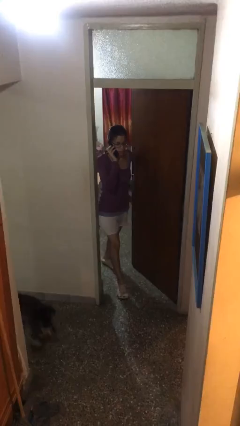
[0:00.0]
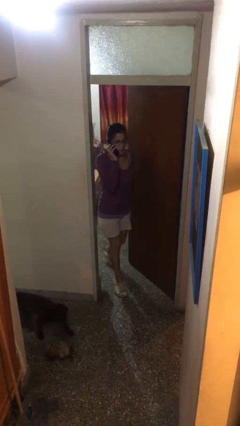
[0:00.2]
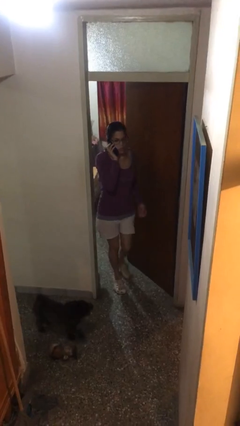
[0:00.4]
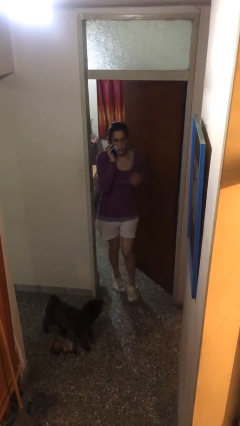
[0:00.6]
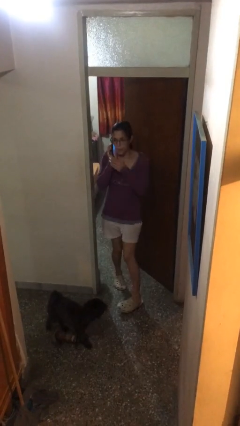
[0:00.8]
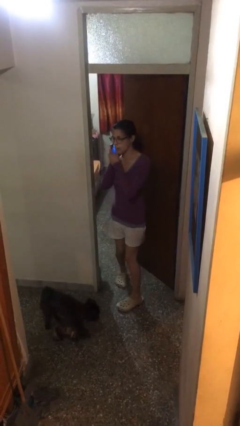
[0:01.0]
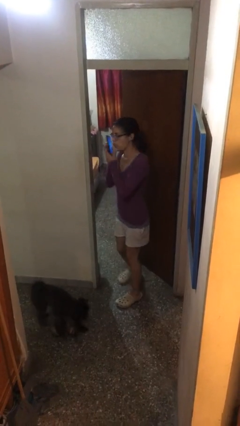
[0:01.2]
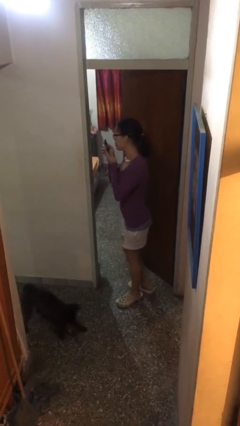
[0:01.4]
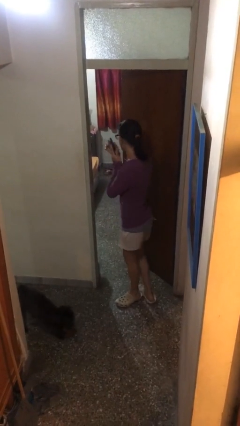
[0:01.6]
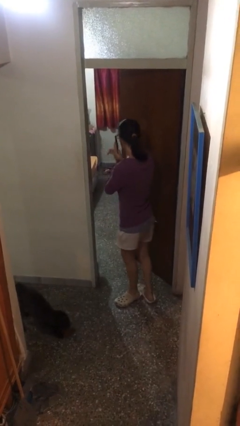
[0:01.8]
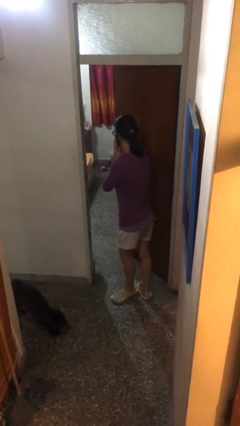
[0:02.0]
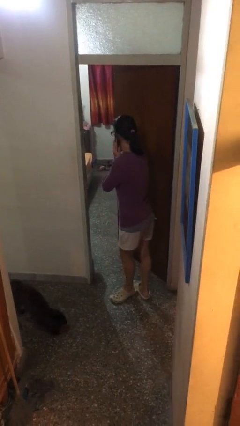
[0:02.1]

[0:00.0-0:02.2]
person enters scene through structure

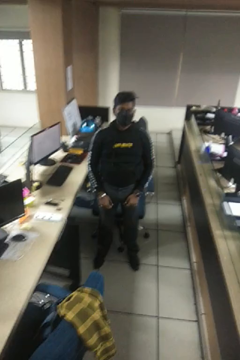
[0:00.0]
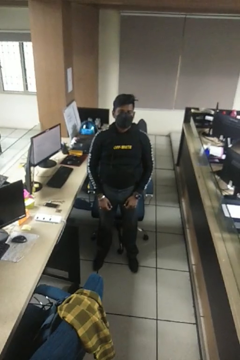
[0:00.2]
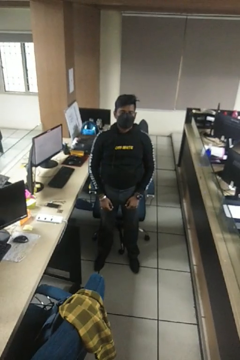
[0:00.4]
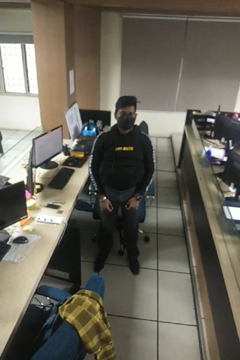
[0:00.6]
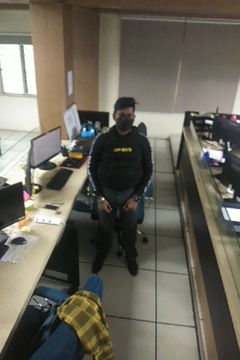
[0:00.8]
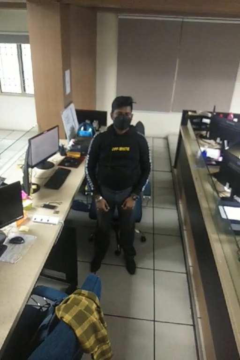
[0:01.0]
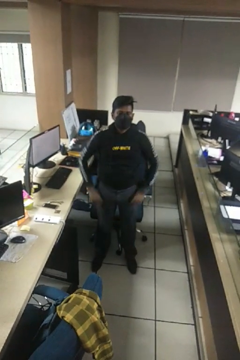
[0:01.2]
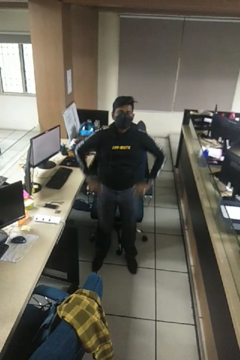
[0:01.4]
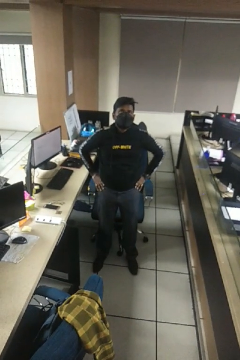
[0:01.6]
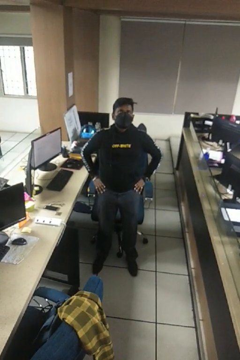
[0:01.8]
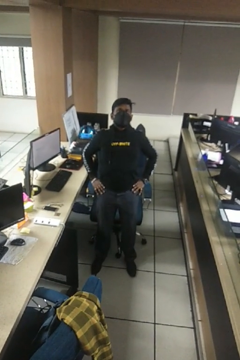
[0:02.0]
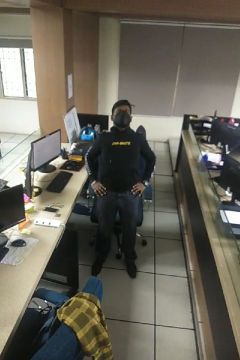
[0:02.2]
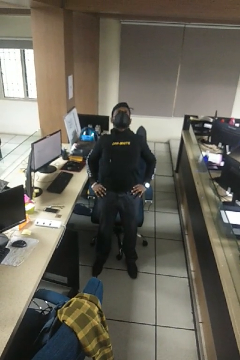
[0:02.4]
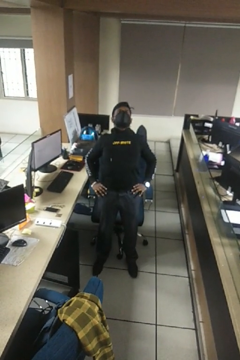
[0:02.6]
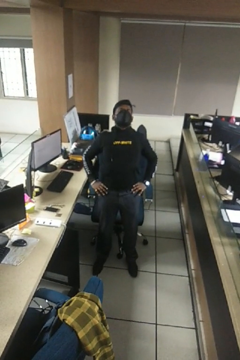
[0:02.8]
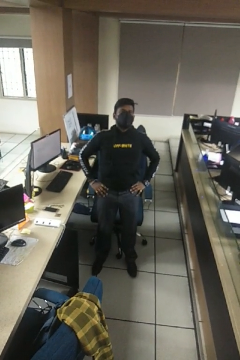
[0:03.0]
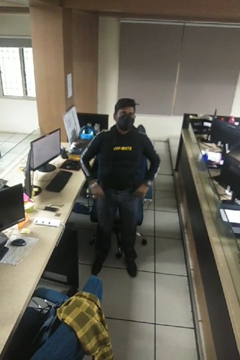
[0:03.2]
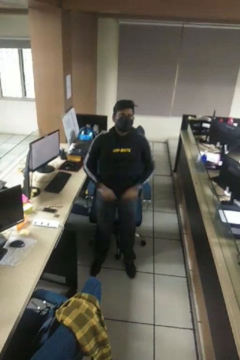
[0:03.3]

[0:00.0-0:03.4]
person stretches back

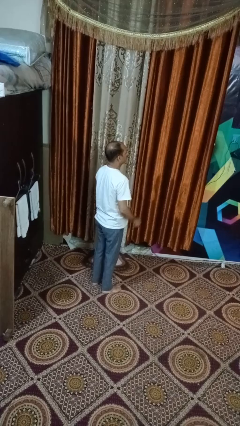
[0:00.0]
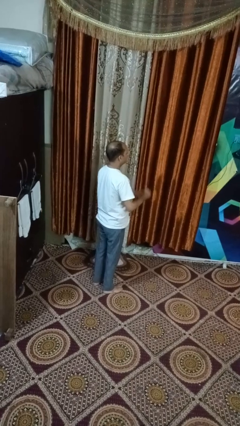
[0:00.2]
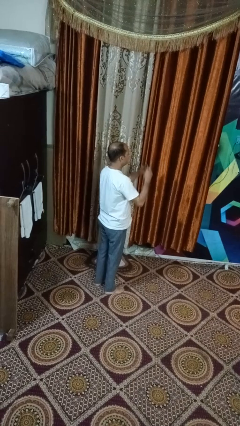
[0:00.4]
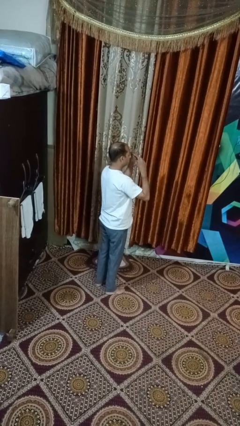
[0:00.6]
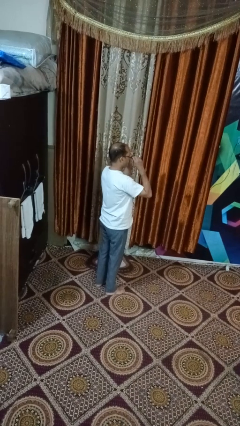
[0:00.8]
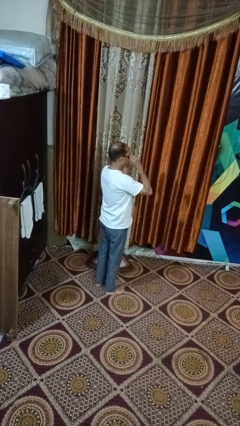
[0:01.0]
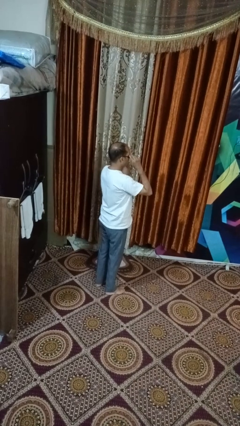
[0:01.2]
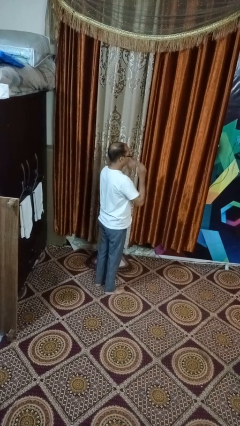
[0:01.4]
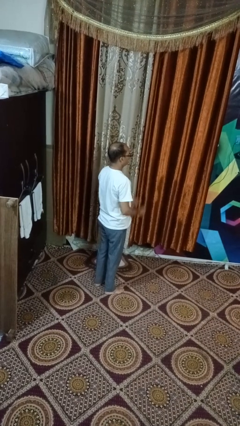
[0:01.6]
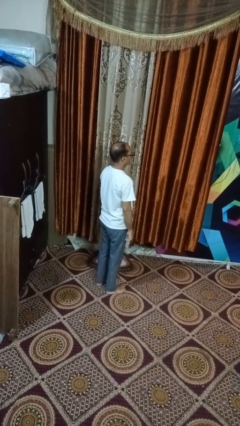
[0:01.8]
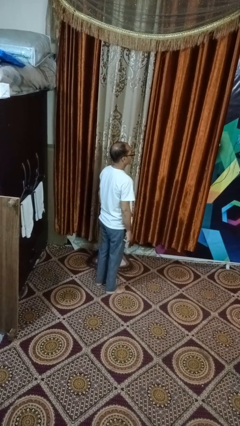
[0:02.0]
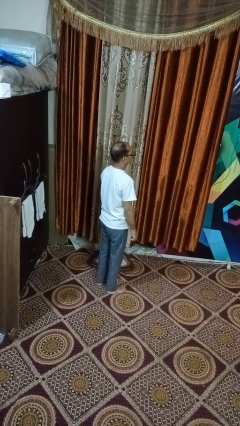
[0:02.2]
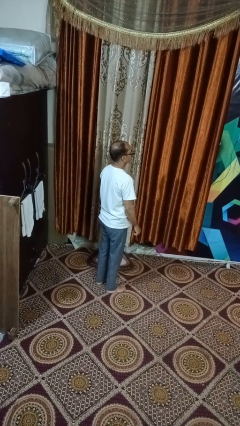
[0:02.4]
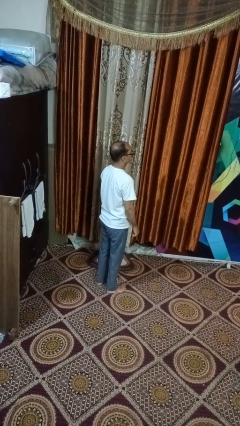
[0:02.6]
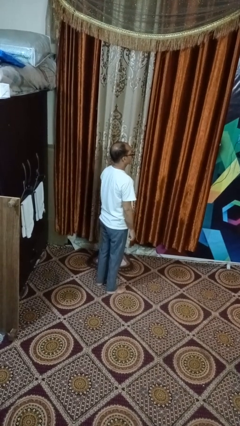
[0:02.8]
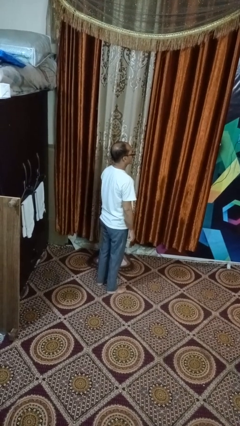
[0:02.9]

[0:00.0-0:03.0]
person puts on glasses

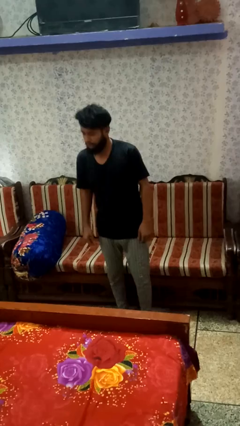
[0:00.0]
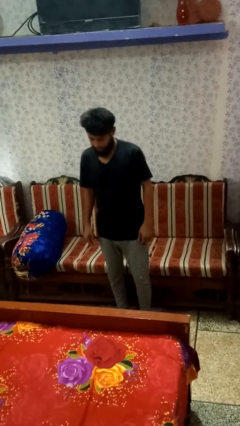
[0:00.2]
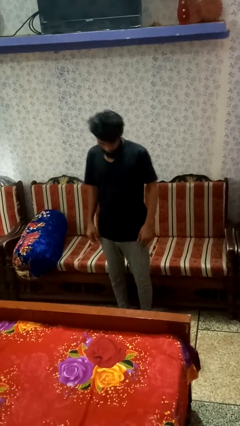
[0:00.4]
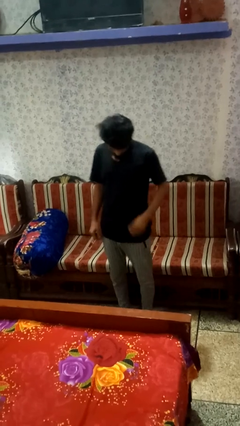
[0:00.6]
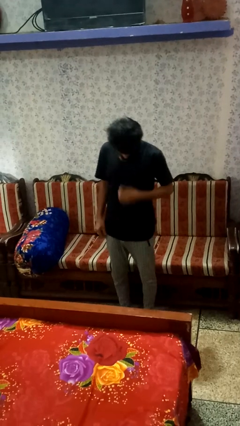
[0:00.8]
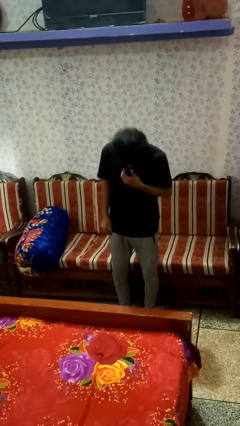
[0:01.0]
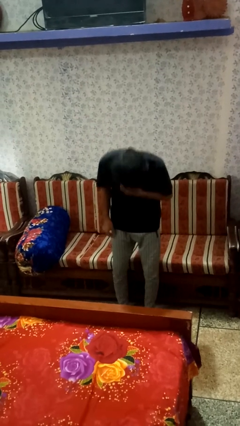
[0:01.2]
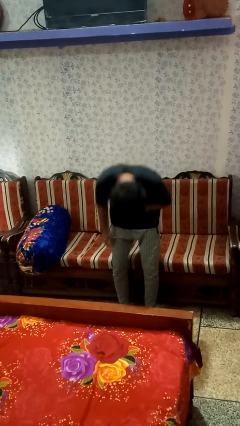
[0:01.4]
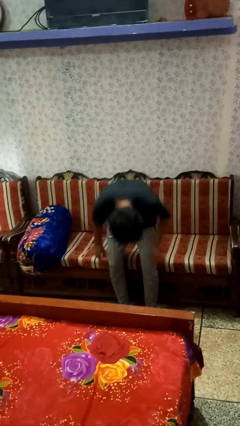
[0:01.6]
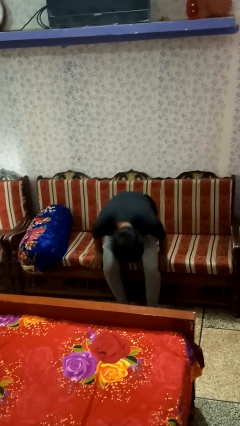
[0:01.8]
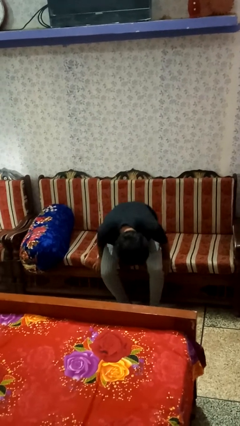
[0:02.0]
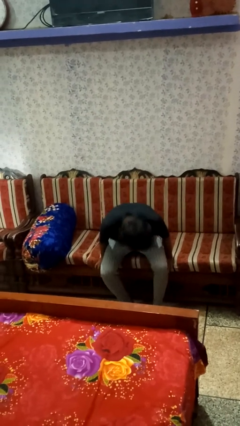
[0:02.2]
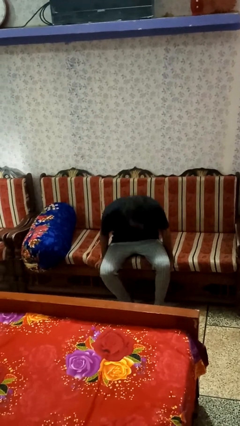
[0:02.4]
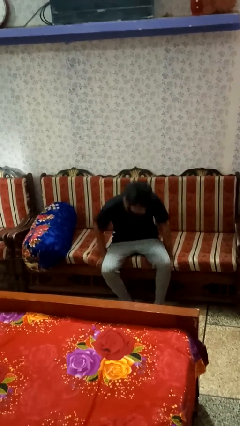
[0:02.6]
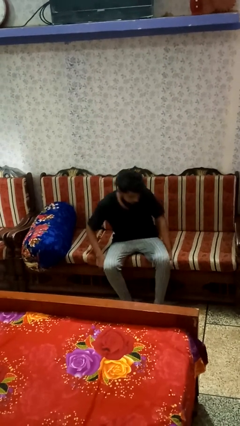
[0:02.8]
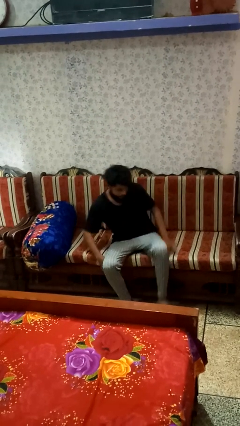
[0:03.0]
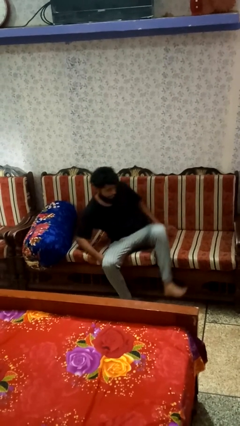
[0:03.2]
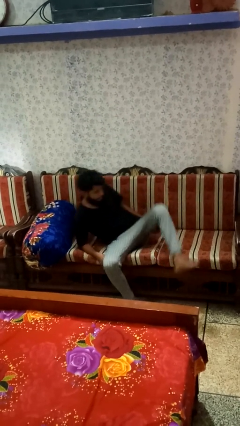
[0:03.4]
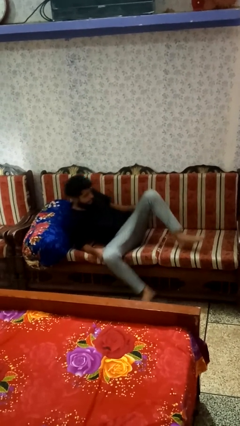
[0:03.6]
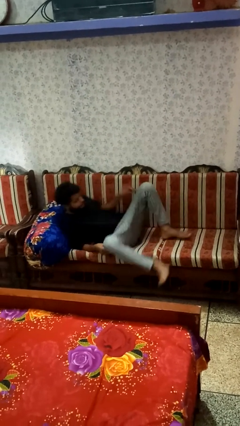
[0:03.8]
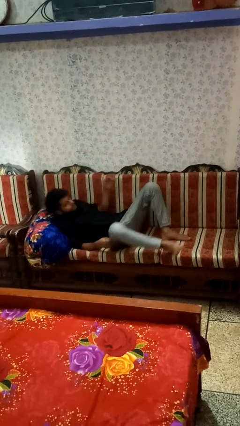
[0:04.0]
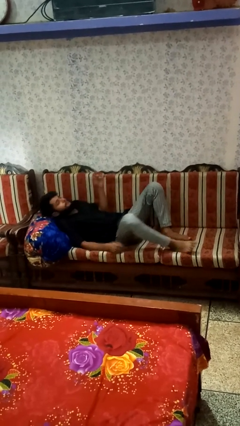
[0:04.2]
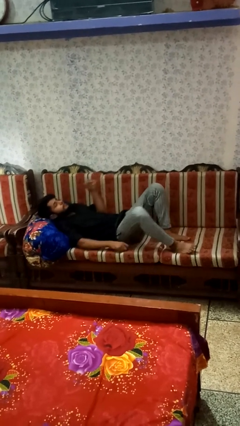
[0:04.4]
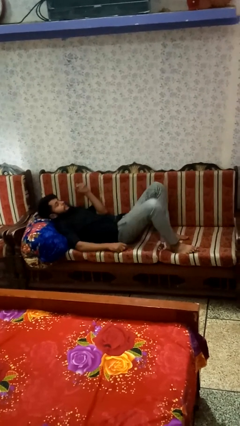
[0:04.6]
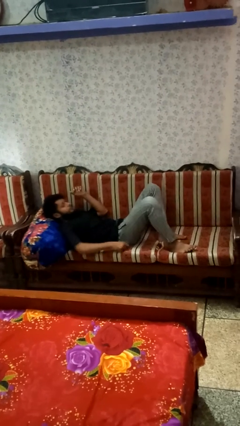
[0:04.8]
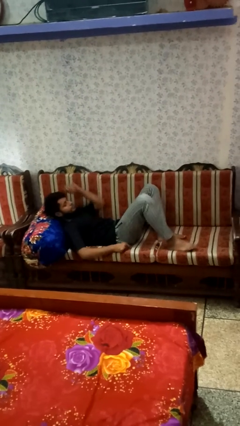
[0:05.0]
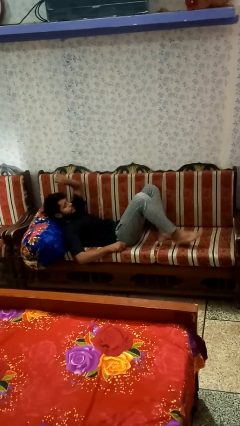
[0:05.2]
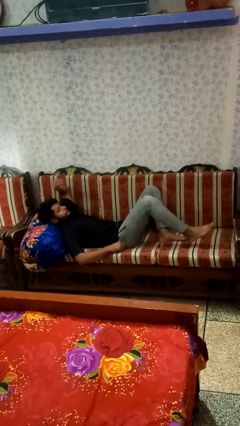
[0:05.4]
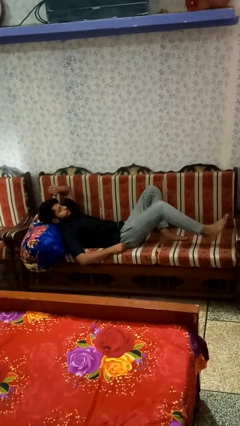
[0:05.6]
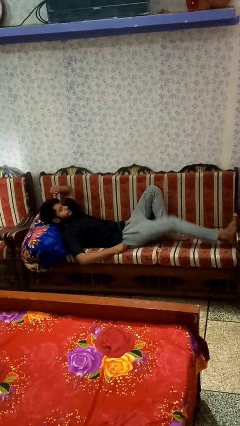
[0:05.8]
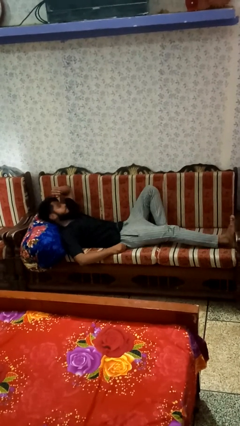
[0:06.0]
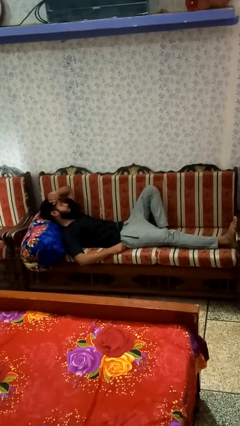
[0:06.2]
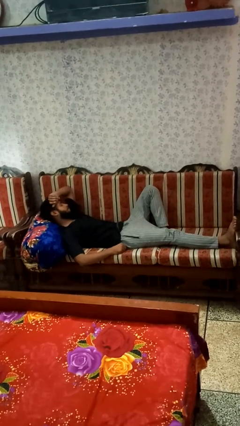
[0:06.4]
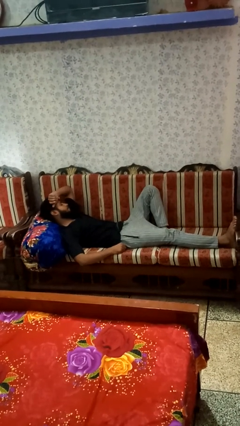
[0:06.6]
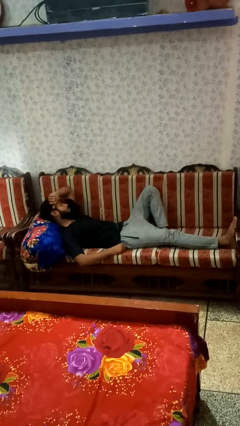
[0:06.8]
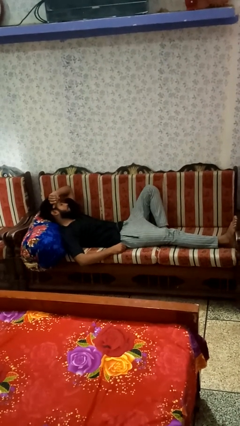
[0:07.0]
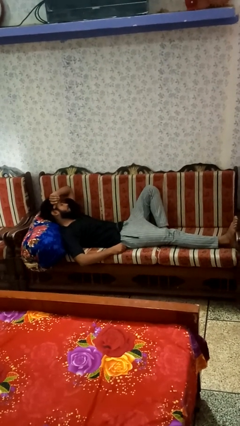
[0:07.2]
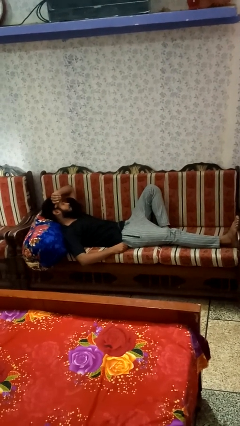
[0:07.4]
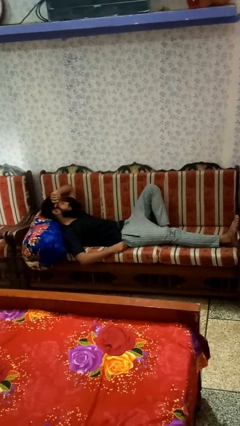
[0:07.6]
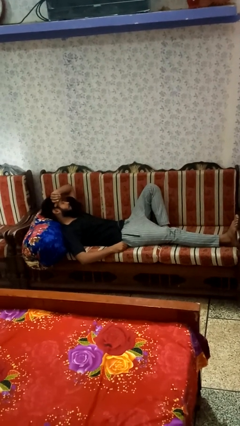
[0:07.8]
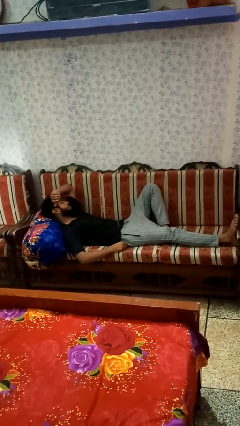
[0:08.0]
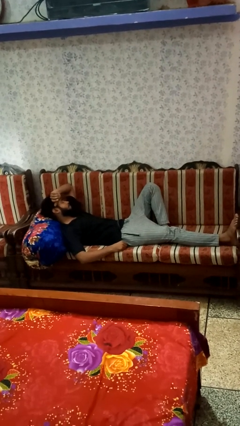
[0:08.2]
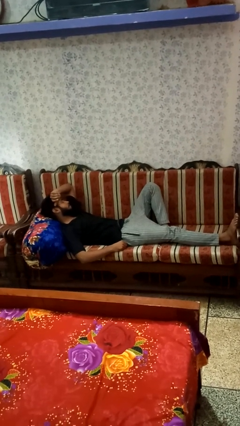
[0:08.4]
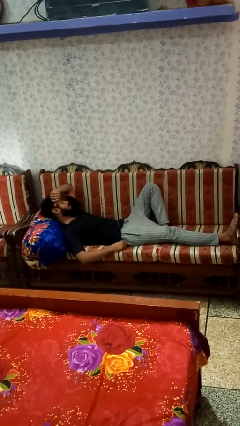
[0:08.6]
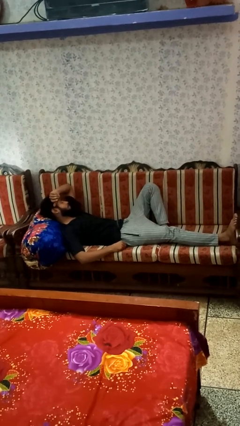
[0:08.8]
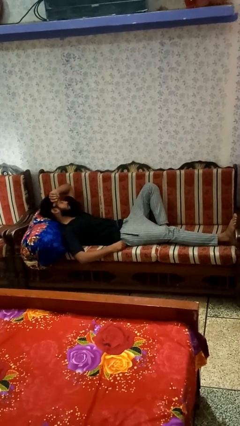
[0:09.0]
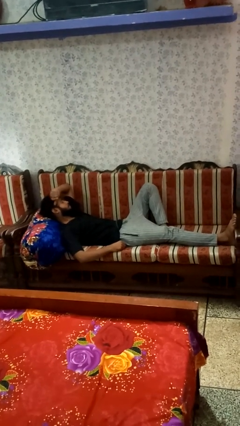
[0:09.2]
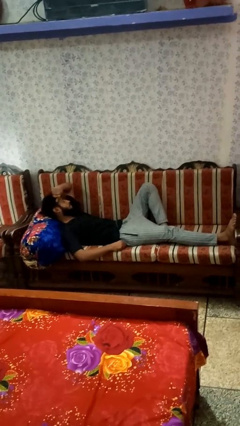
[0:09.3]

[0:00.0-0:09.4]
person lies down on couch

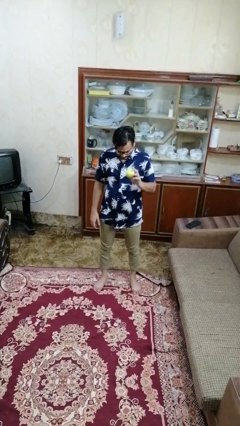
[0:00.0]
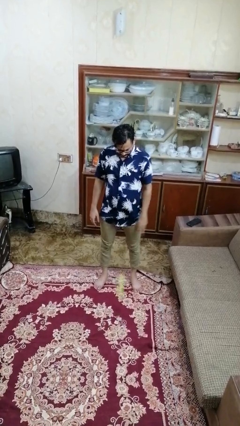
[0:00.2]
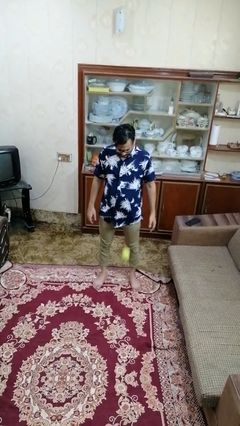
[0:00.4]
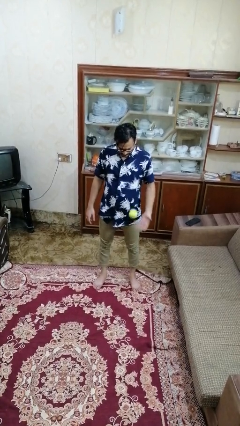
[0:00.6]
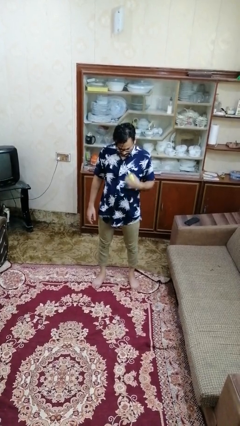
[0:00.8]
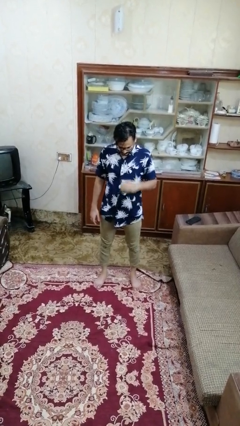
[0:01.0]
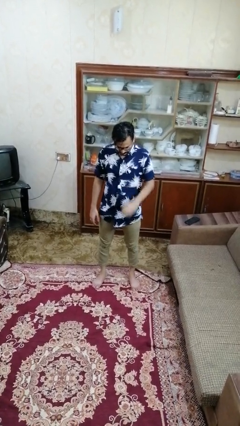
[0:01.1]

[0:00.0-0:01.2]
person bounces ball on floor
